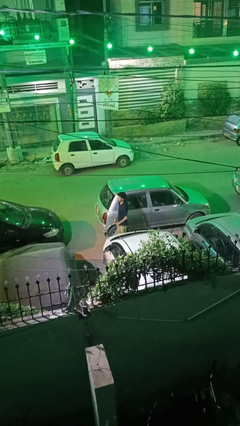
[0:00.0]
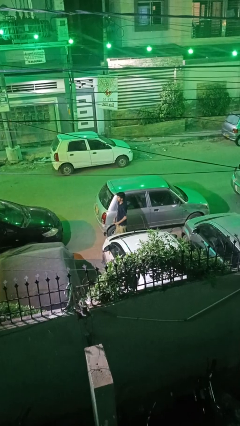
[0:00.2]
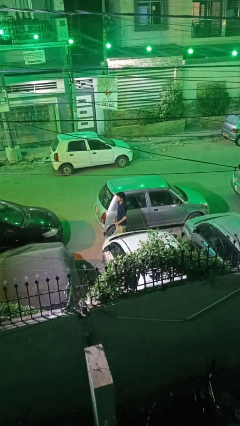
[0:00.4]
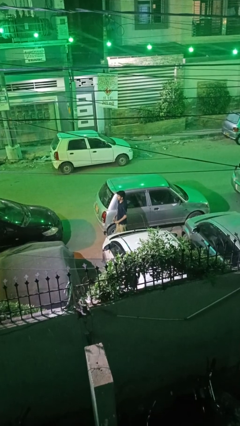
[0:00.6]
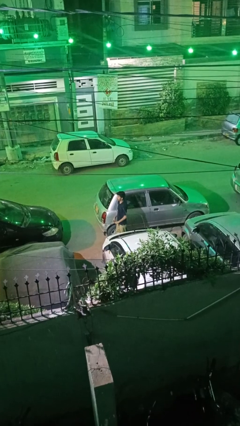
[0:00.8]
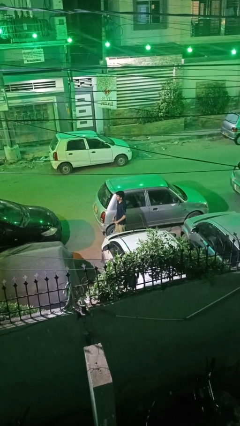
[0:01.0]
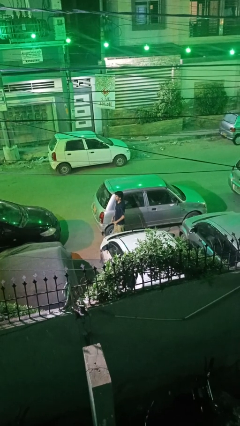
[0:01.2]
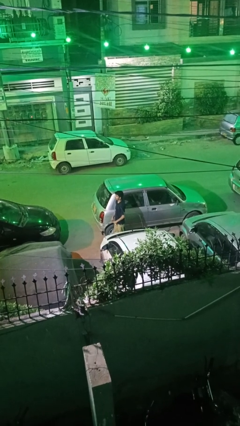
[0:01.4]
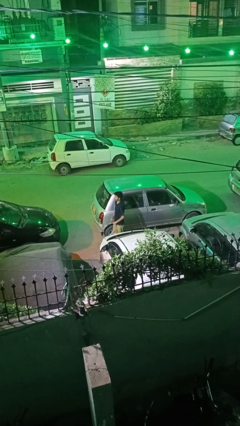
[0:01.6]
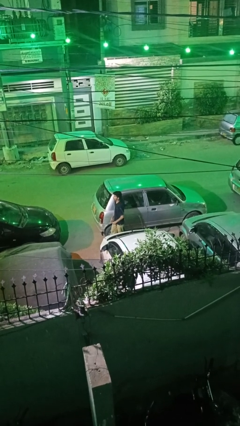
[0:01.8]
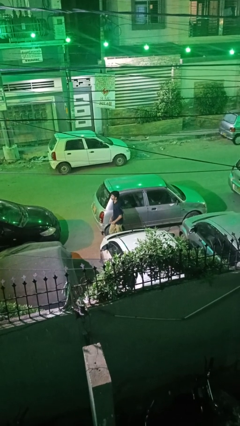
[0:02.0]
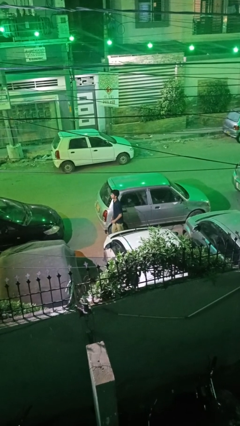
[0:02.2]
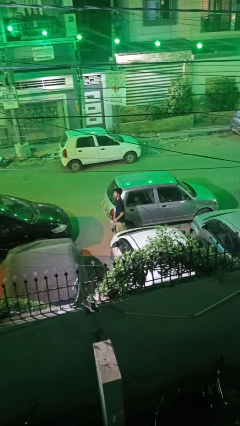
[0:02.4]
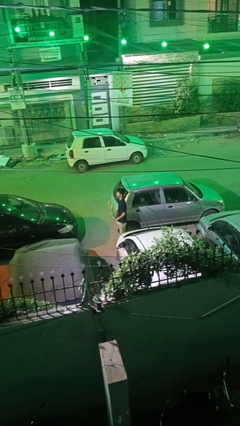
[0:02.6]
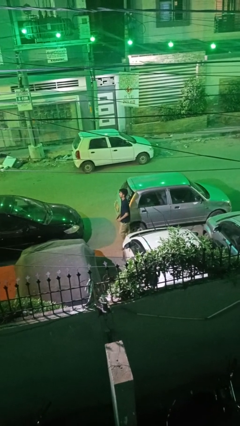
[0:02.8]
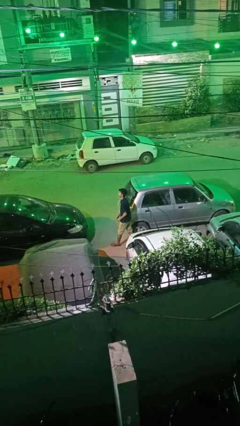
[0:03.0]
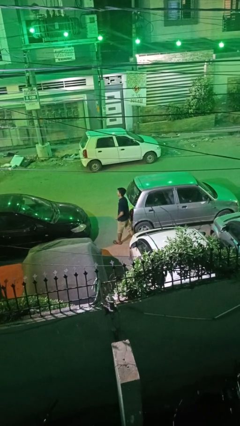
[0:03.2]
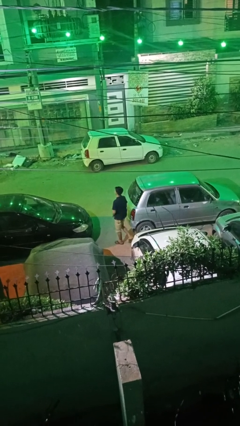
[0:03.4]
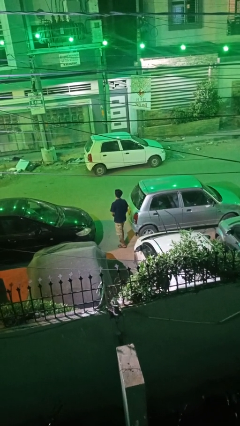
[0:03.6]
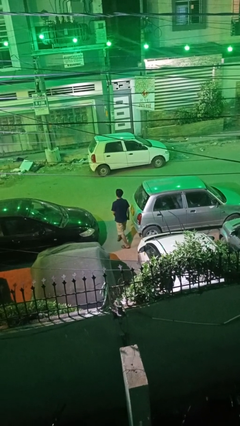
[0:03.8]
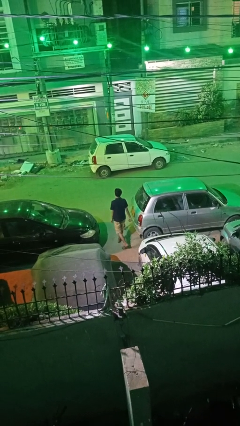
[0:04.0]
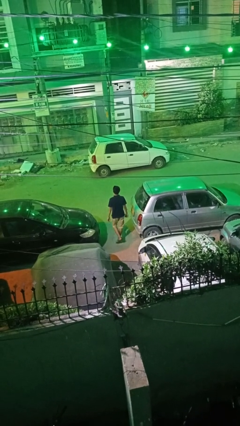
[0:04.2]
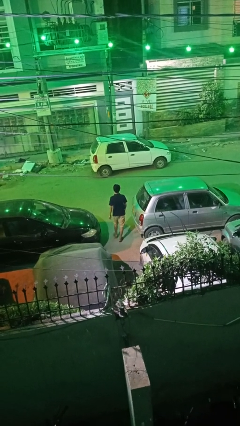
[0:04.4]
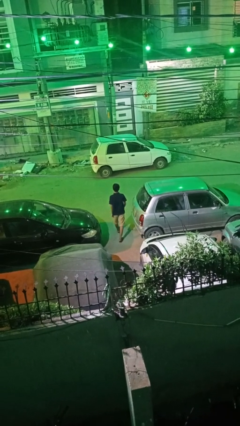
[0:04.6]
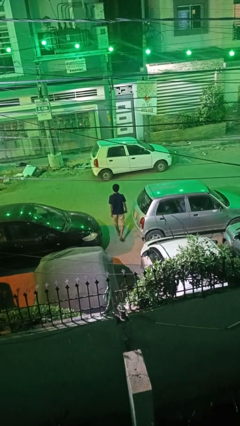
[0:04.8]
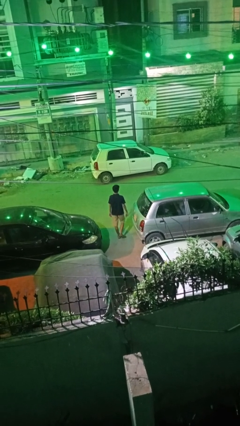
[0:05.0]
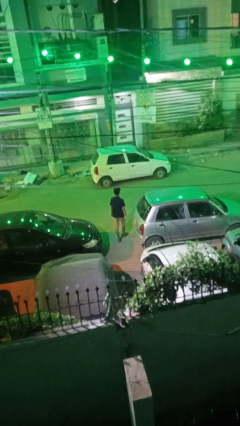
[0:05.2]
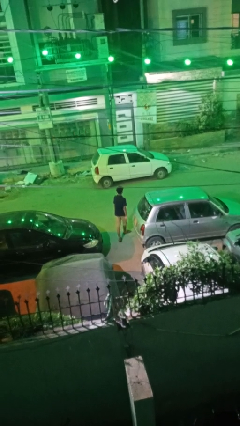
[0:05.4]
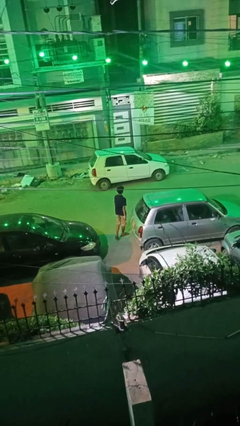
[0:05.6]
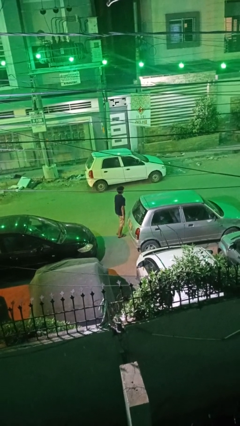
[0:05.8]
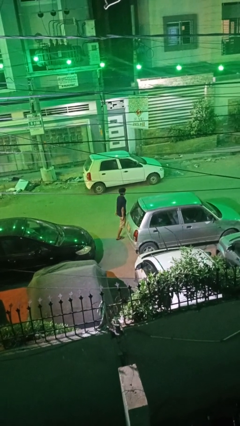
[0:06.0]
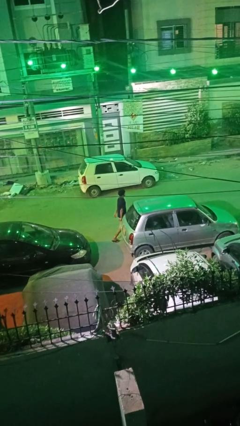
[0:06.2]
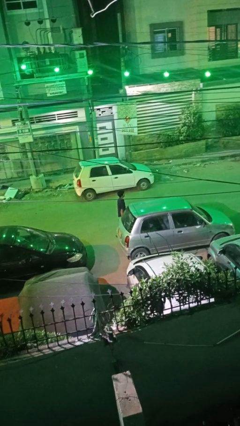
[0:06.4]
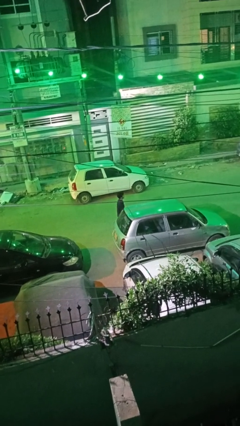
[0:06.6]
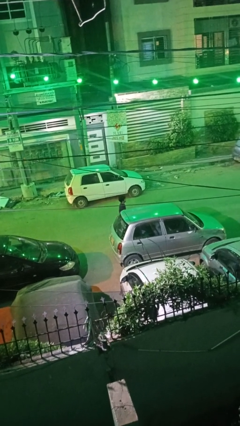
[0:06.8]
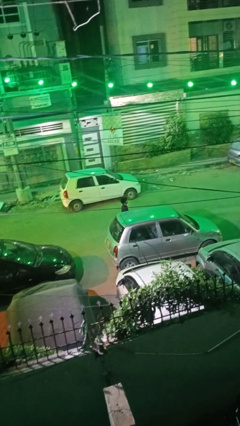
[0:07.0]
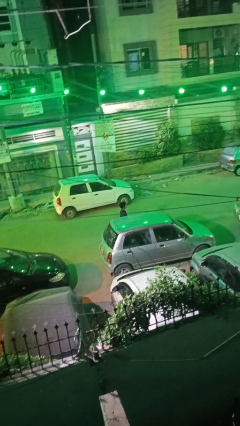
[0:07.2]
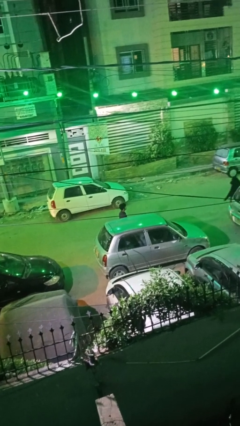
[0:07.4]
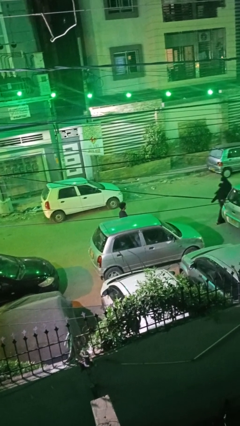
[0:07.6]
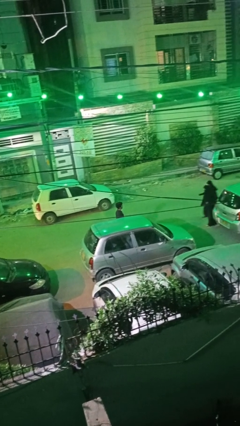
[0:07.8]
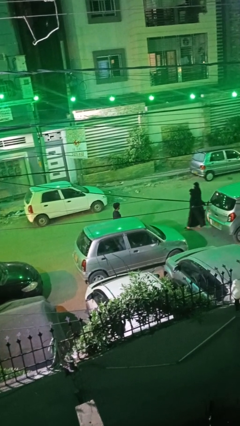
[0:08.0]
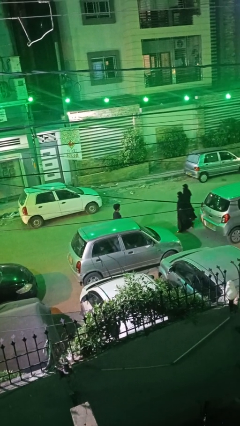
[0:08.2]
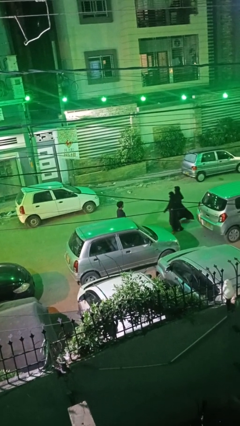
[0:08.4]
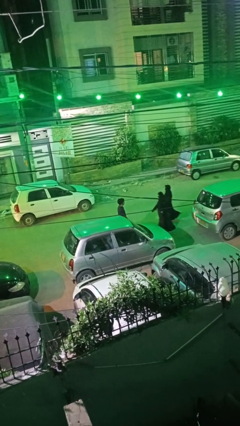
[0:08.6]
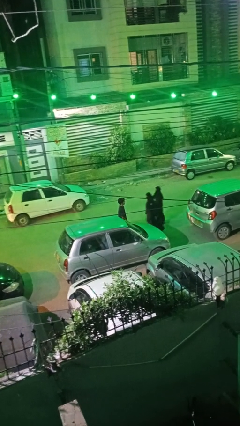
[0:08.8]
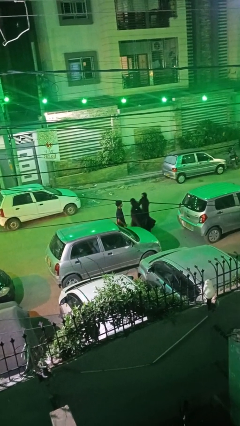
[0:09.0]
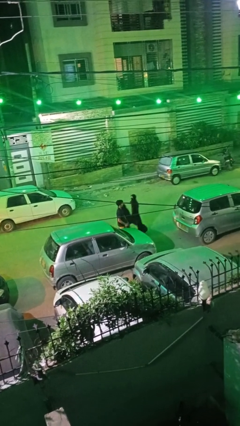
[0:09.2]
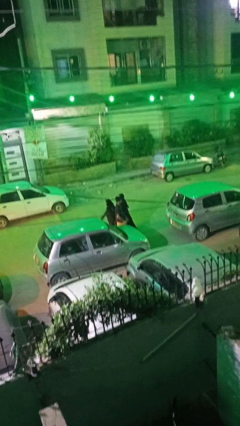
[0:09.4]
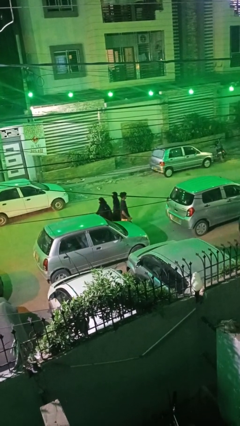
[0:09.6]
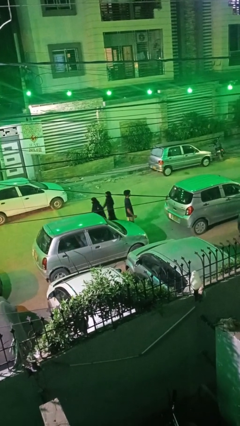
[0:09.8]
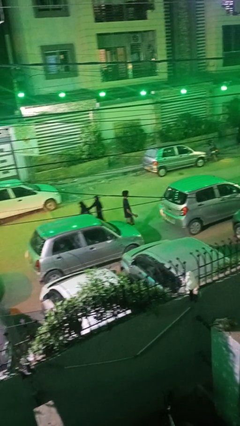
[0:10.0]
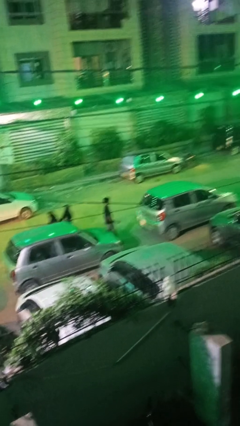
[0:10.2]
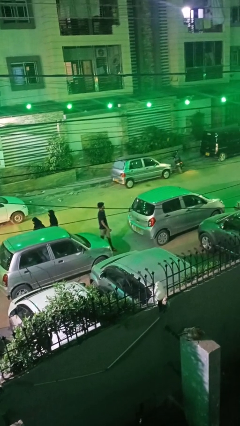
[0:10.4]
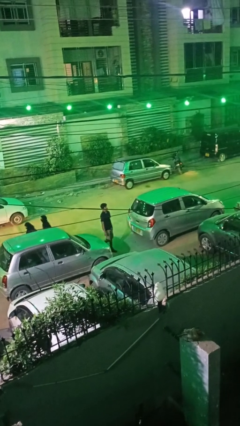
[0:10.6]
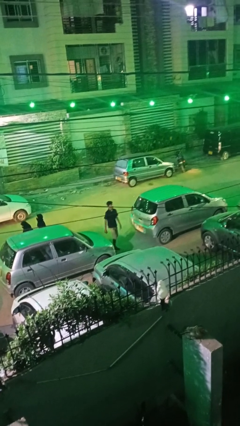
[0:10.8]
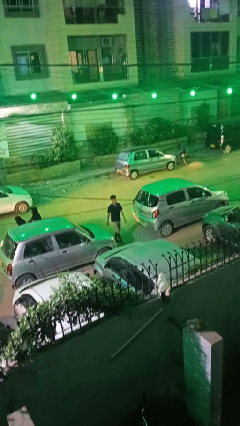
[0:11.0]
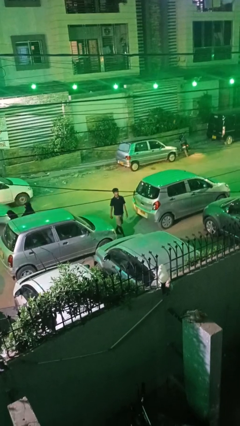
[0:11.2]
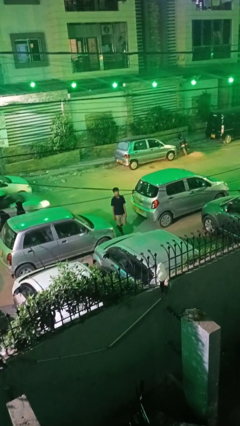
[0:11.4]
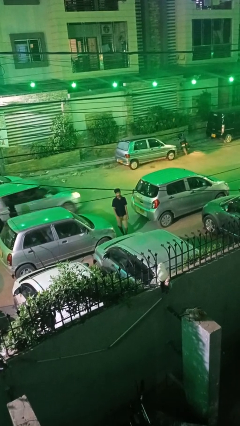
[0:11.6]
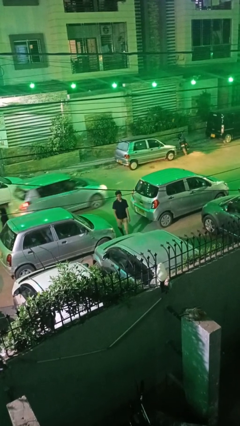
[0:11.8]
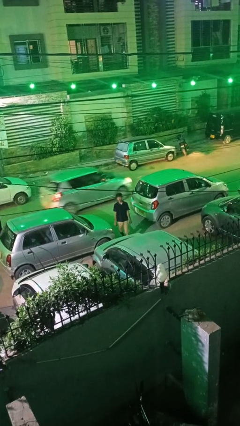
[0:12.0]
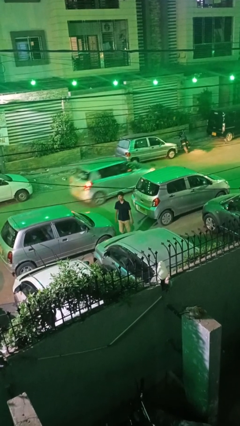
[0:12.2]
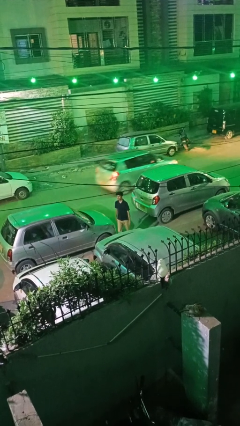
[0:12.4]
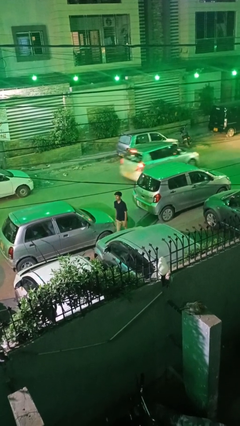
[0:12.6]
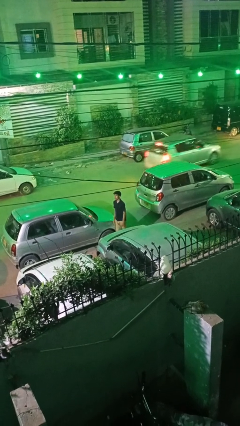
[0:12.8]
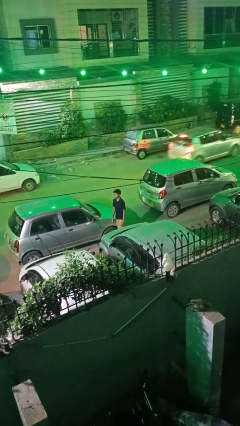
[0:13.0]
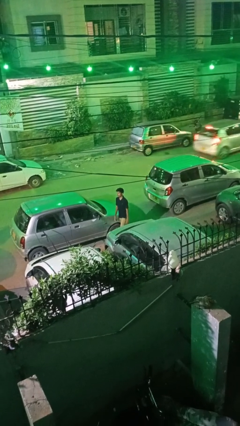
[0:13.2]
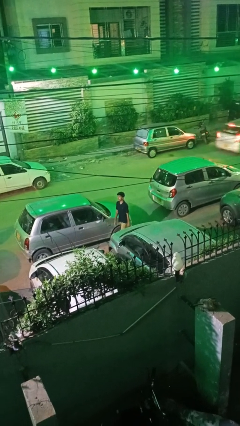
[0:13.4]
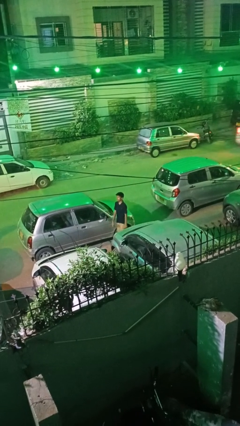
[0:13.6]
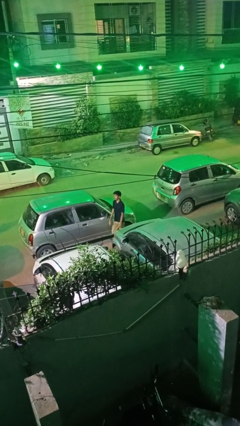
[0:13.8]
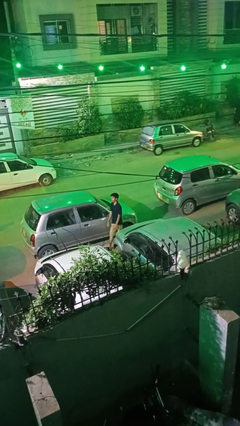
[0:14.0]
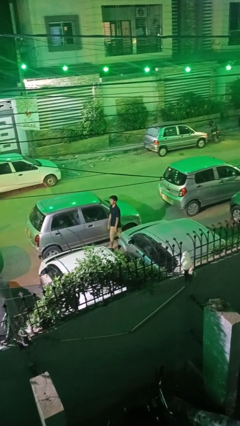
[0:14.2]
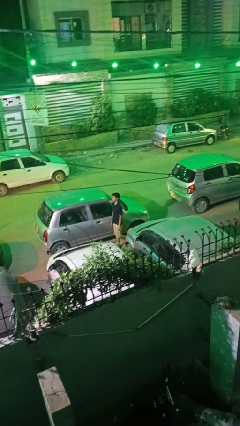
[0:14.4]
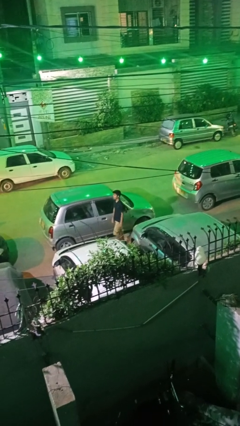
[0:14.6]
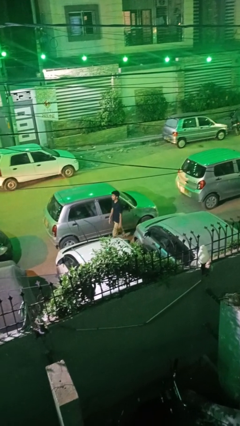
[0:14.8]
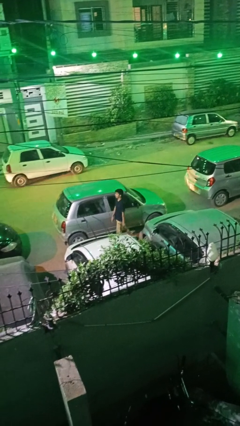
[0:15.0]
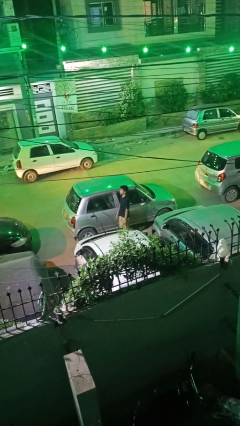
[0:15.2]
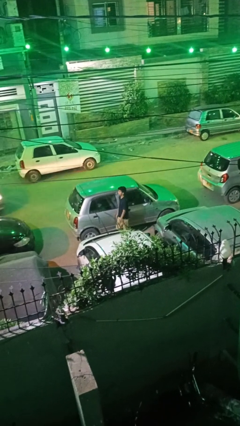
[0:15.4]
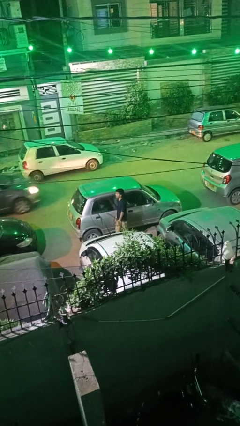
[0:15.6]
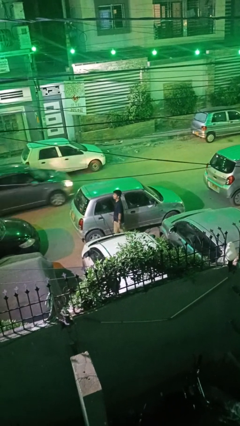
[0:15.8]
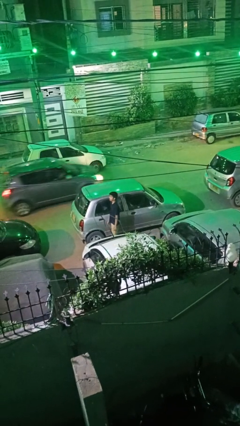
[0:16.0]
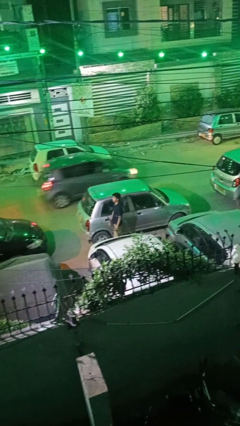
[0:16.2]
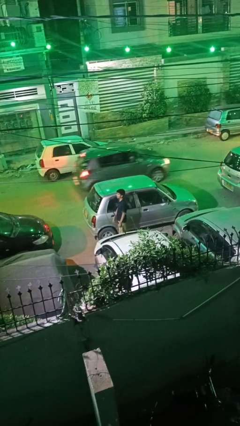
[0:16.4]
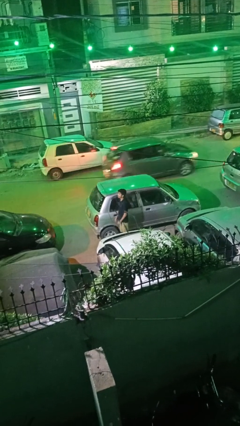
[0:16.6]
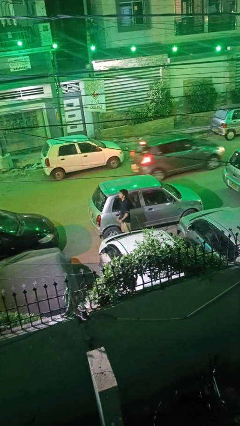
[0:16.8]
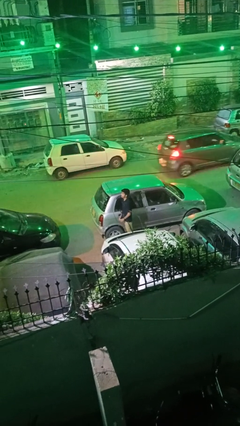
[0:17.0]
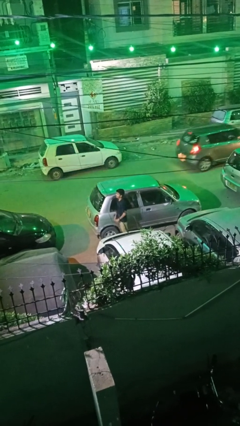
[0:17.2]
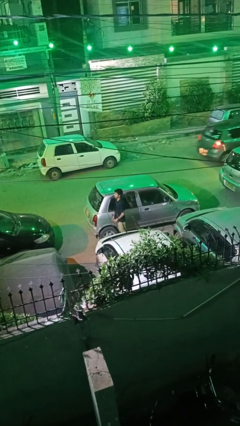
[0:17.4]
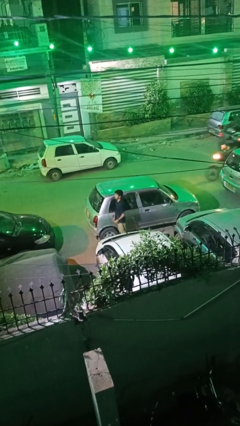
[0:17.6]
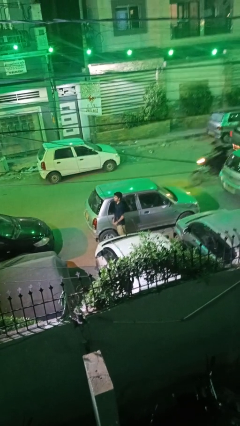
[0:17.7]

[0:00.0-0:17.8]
person walks around car

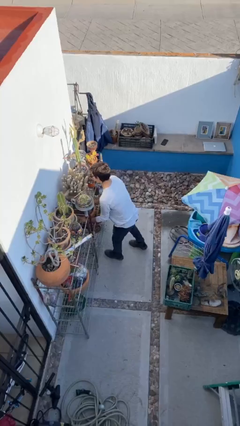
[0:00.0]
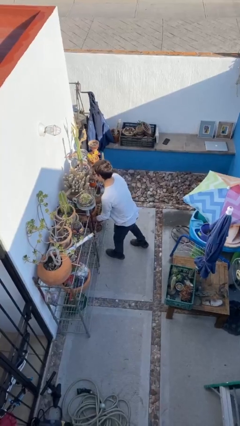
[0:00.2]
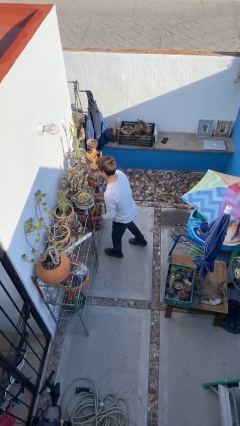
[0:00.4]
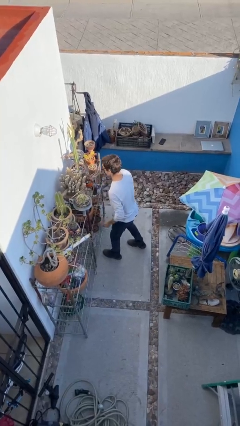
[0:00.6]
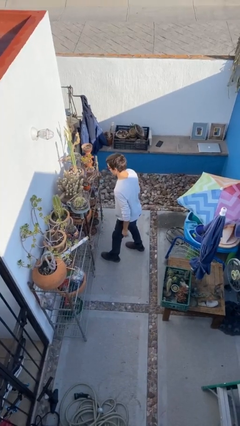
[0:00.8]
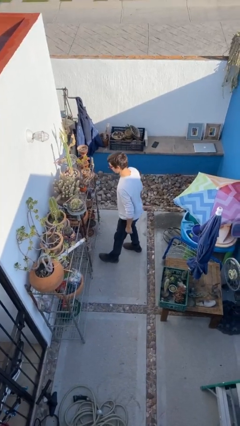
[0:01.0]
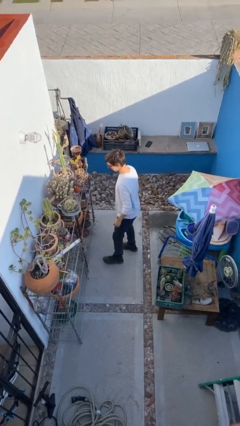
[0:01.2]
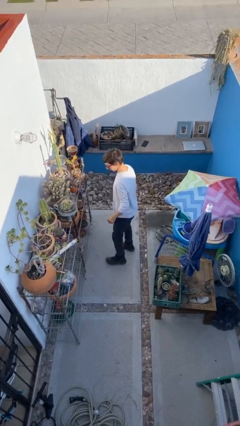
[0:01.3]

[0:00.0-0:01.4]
person puts down object on shelf
